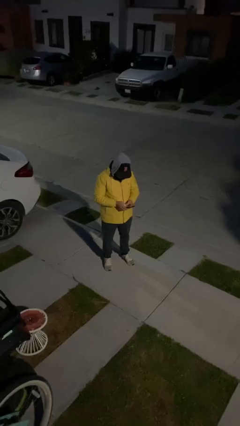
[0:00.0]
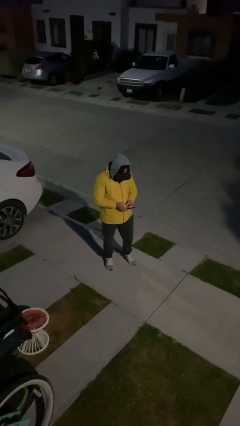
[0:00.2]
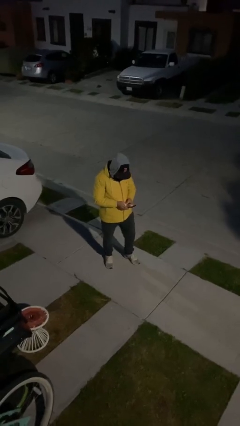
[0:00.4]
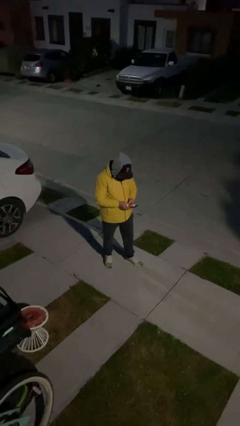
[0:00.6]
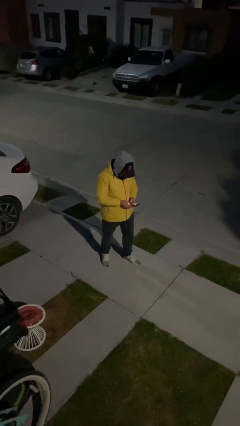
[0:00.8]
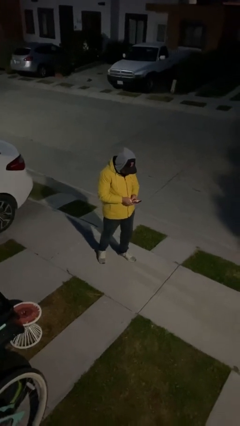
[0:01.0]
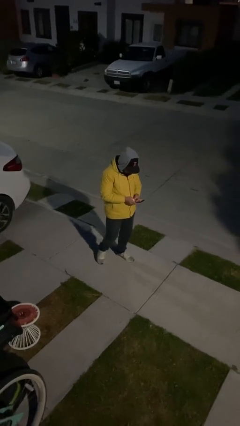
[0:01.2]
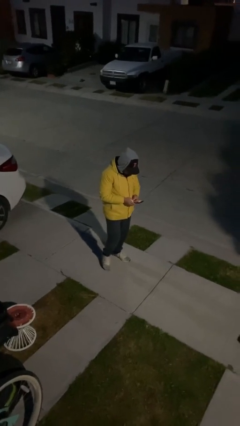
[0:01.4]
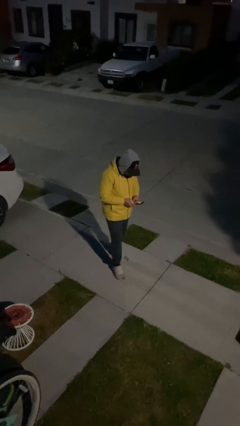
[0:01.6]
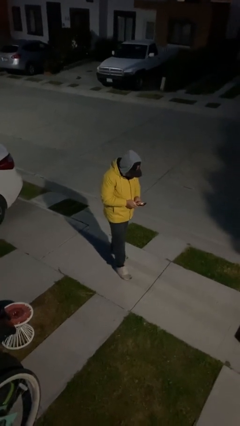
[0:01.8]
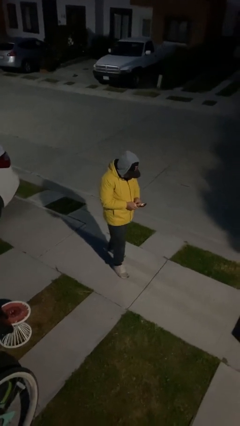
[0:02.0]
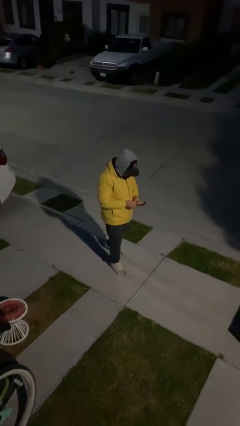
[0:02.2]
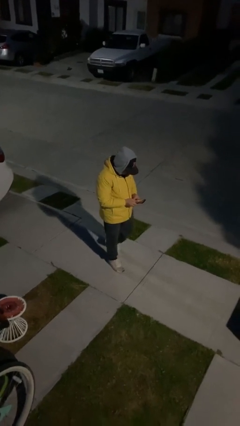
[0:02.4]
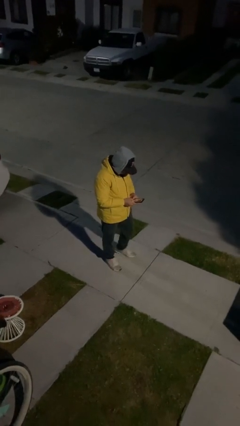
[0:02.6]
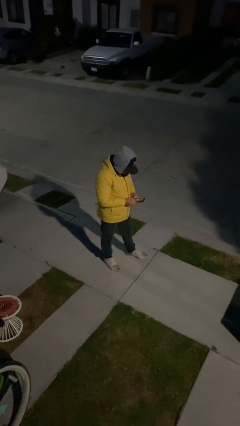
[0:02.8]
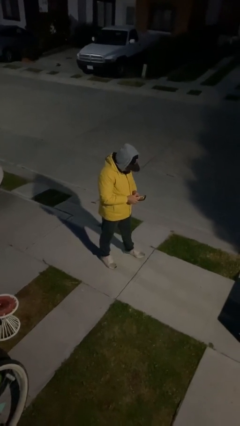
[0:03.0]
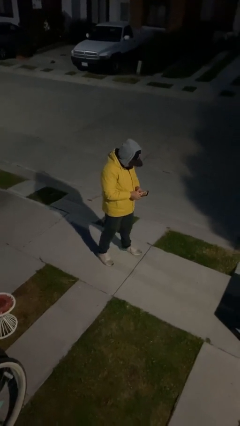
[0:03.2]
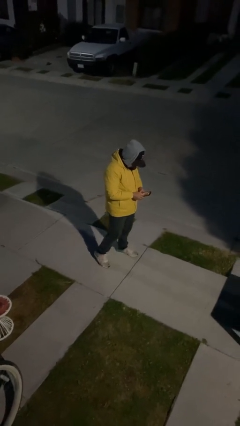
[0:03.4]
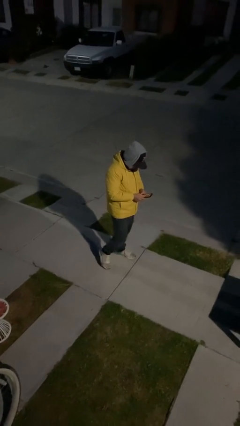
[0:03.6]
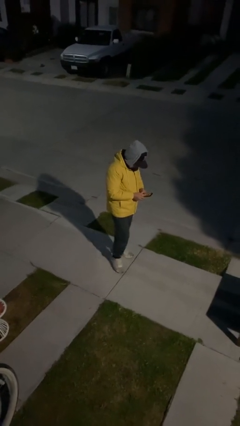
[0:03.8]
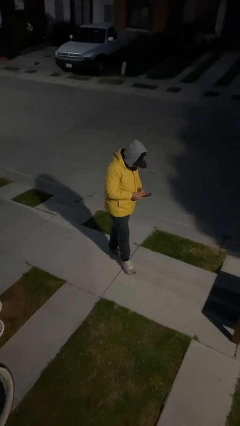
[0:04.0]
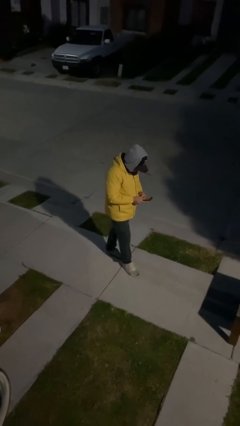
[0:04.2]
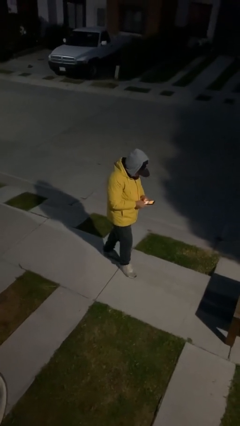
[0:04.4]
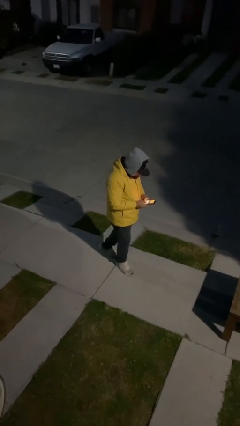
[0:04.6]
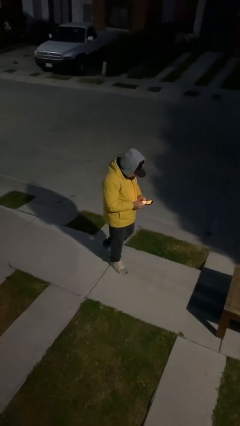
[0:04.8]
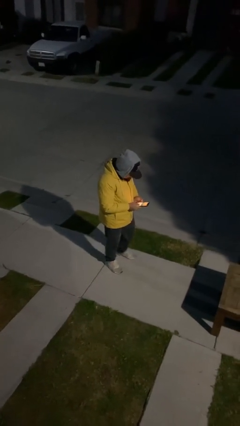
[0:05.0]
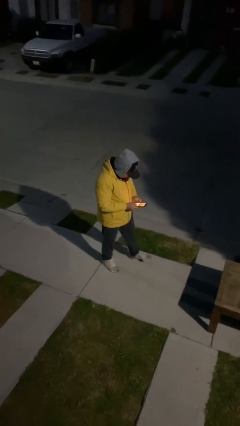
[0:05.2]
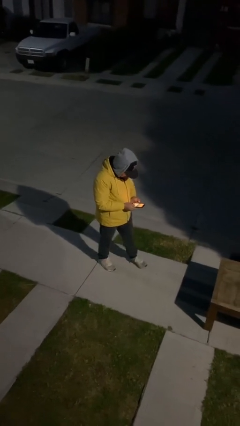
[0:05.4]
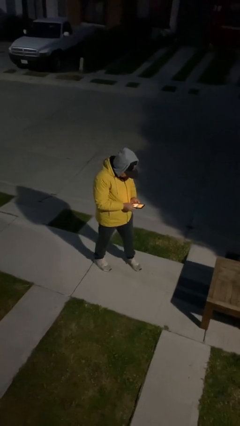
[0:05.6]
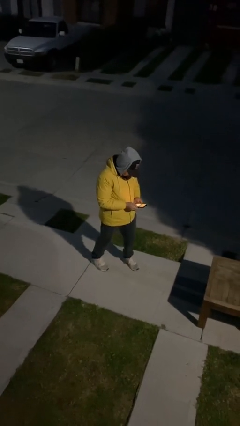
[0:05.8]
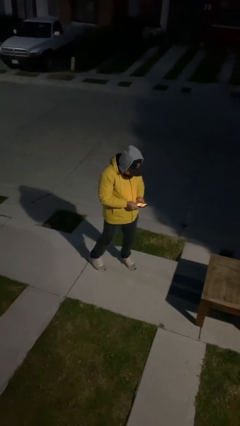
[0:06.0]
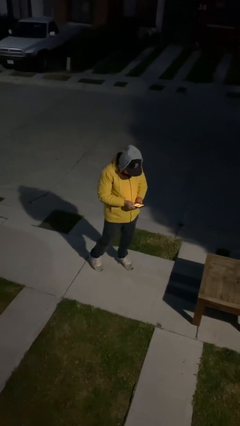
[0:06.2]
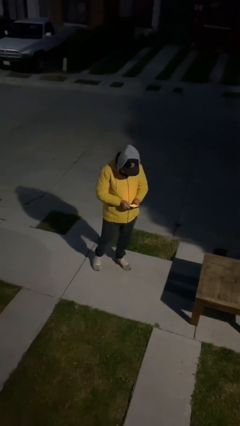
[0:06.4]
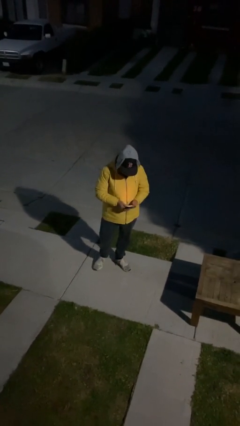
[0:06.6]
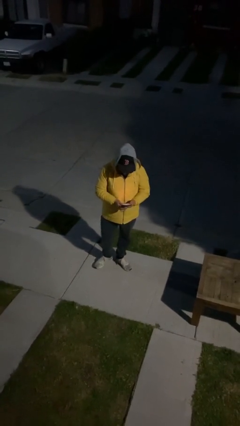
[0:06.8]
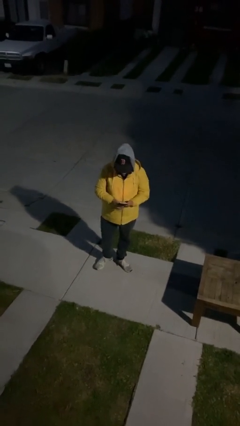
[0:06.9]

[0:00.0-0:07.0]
person texts on phone

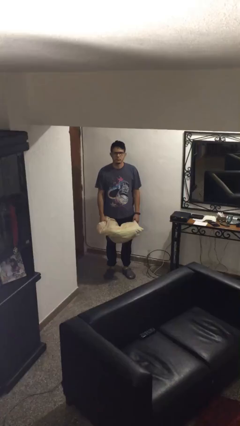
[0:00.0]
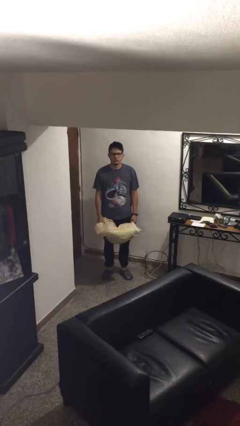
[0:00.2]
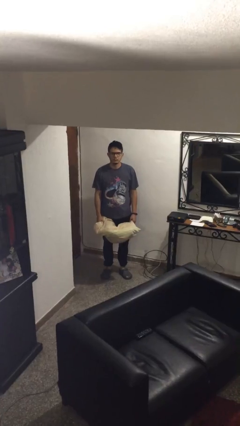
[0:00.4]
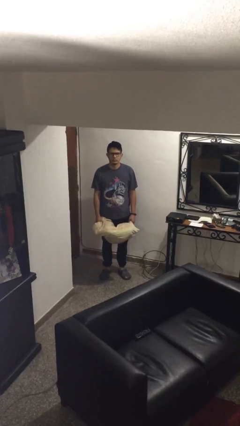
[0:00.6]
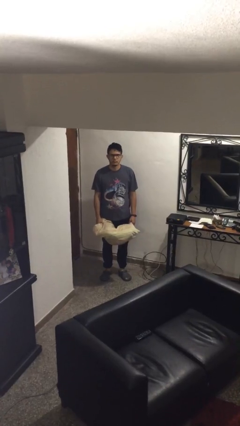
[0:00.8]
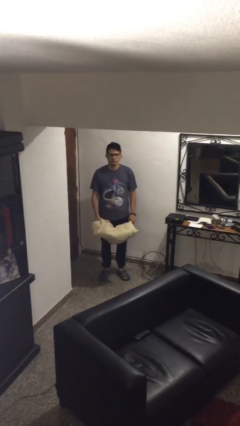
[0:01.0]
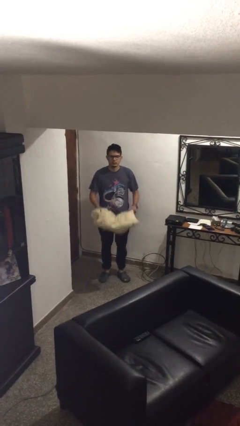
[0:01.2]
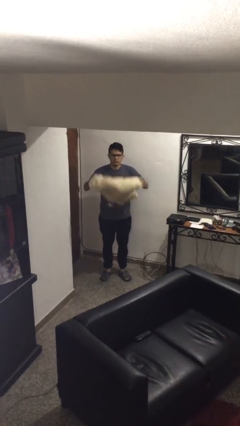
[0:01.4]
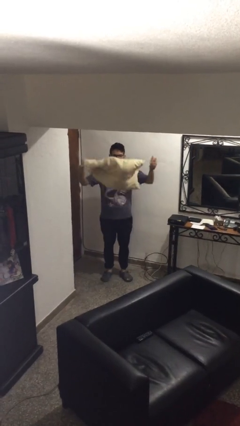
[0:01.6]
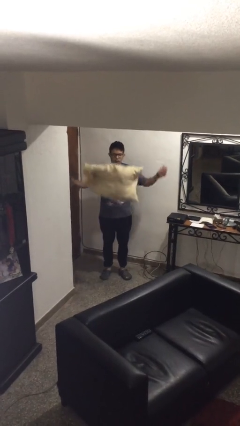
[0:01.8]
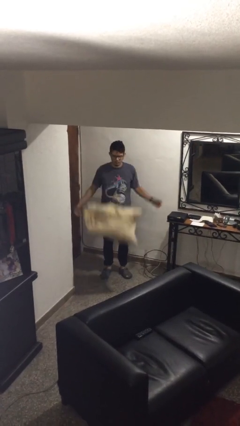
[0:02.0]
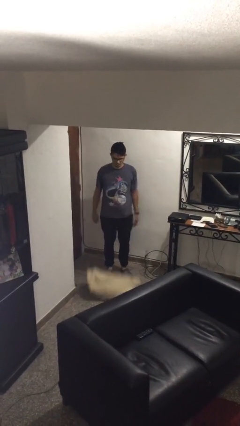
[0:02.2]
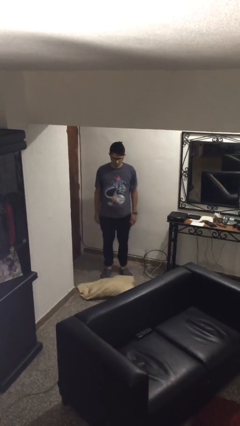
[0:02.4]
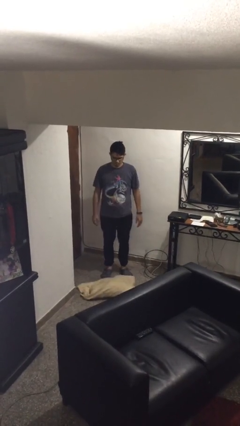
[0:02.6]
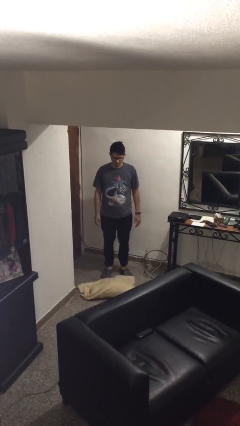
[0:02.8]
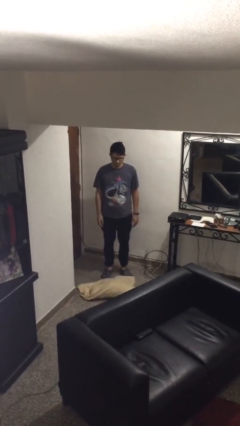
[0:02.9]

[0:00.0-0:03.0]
person throws object into air

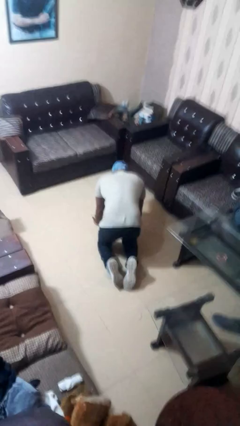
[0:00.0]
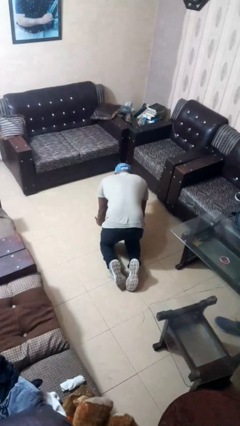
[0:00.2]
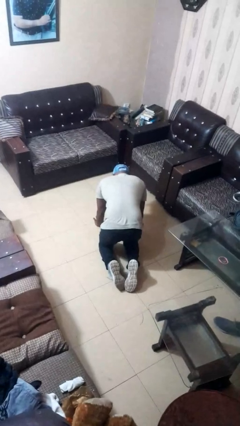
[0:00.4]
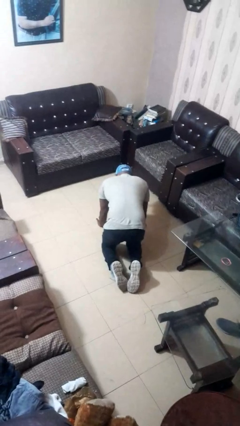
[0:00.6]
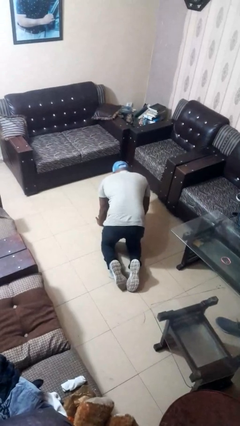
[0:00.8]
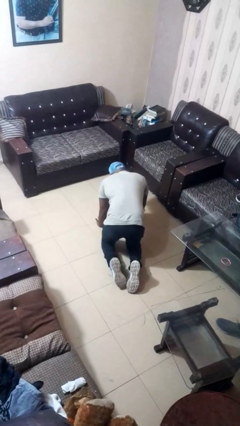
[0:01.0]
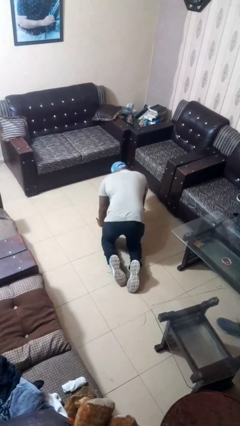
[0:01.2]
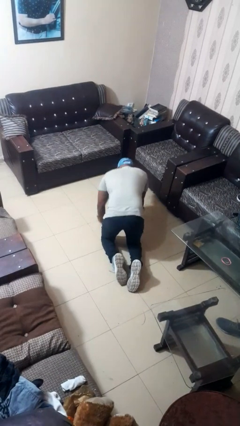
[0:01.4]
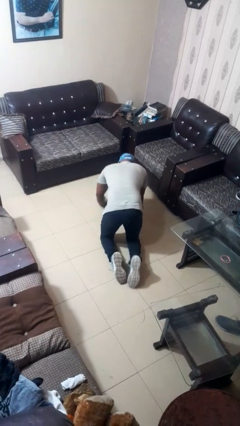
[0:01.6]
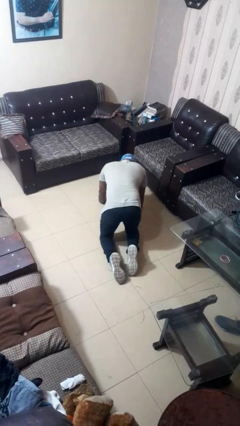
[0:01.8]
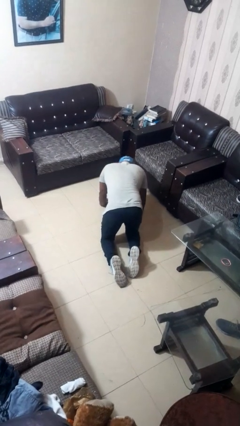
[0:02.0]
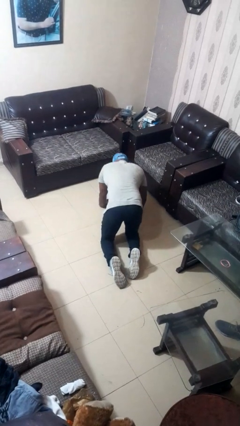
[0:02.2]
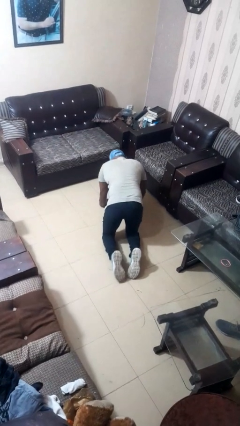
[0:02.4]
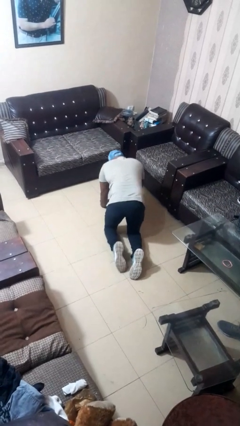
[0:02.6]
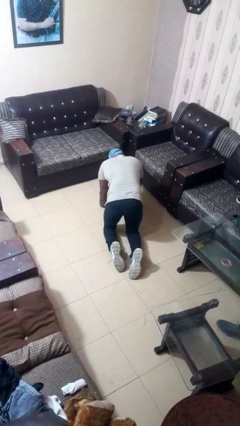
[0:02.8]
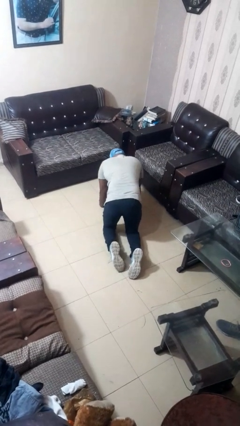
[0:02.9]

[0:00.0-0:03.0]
person crawls

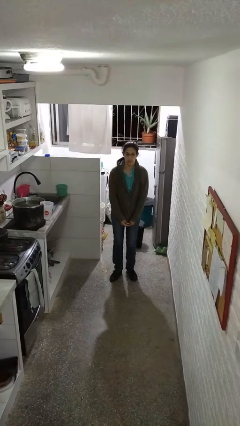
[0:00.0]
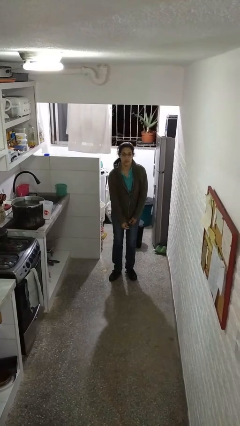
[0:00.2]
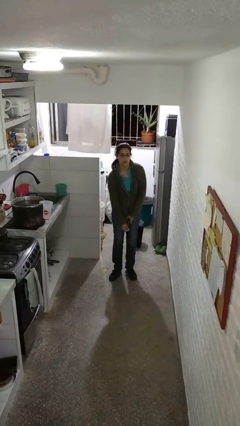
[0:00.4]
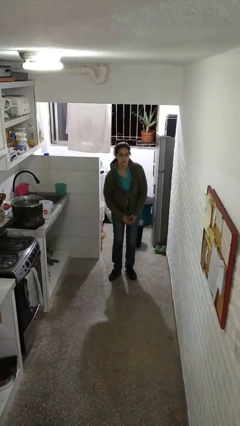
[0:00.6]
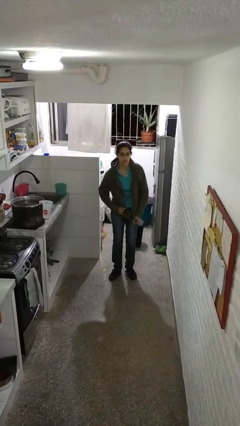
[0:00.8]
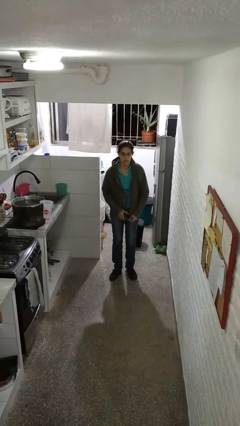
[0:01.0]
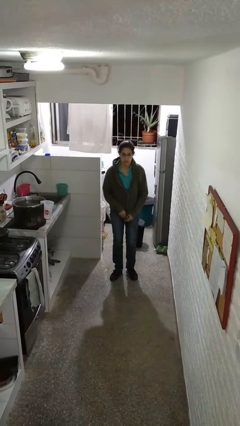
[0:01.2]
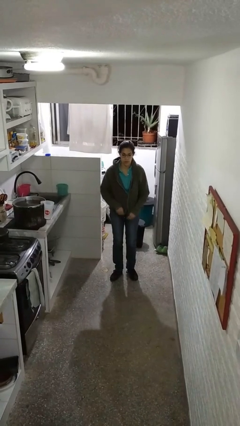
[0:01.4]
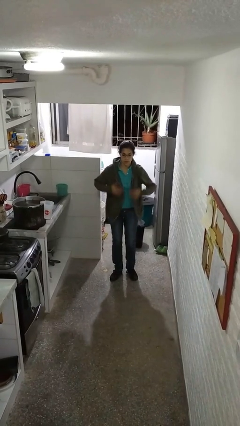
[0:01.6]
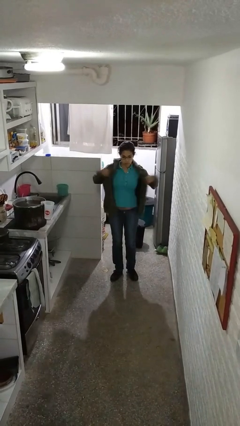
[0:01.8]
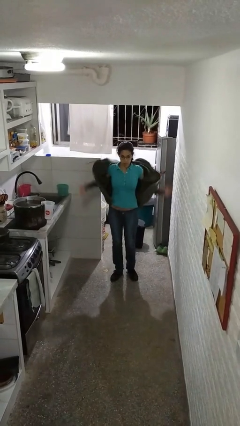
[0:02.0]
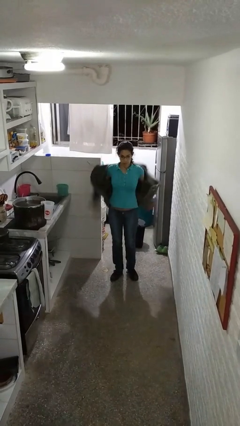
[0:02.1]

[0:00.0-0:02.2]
person unzips jacket

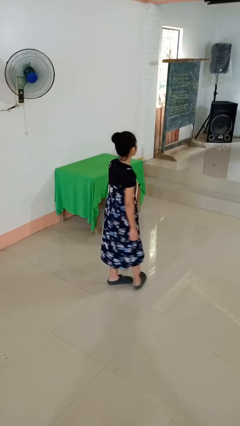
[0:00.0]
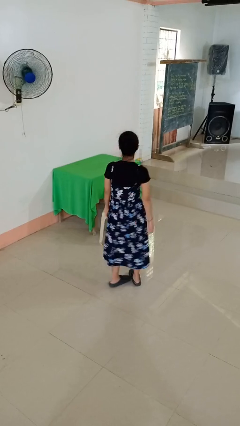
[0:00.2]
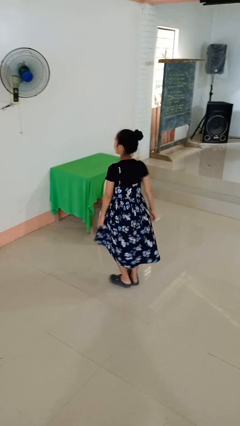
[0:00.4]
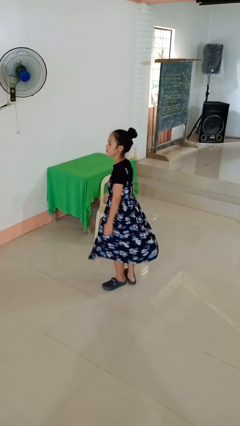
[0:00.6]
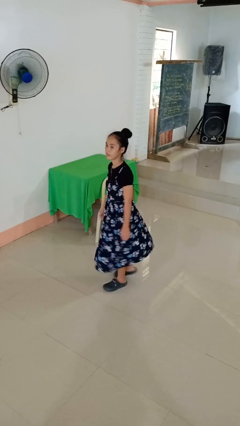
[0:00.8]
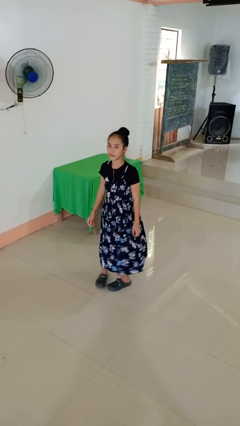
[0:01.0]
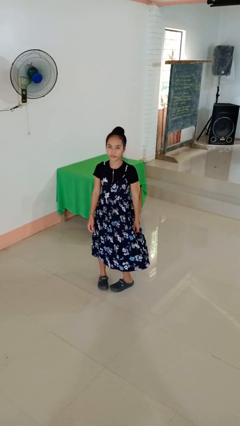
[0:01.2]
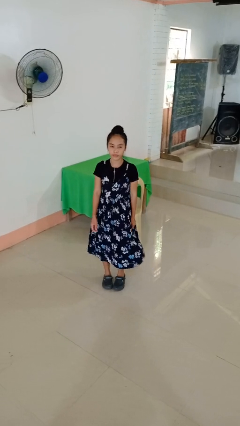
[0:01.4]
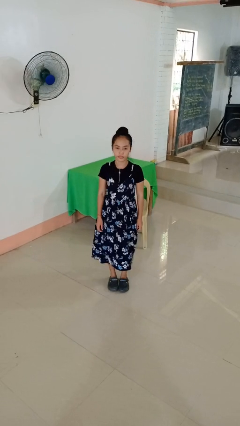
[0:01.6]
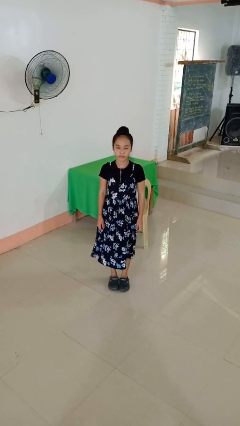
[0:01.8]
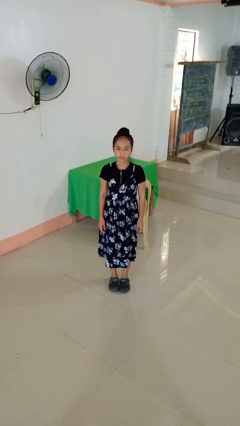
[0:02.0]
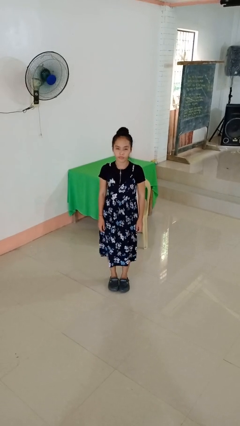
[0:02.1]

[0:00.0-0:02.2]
person twirls

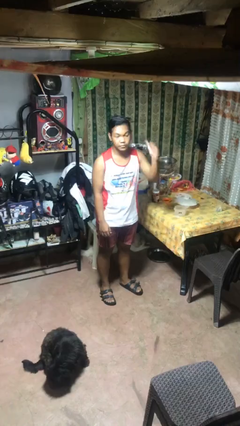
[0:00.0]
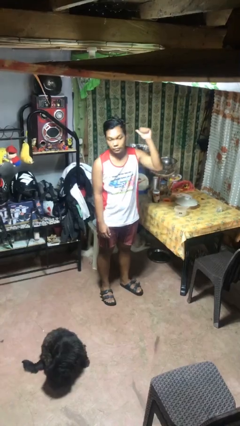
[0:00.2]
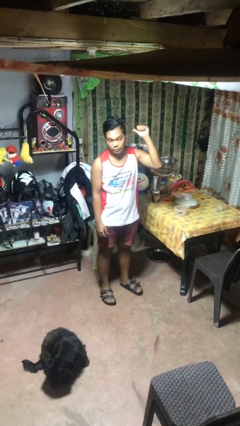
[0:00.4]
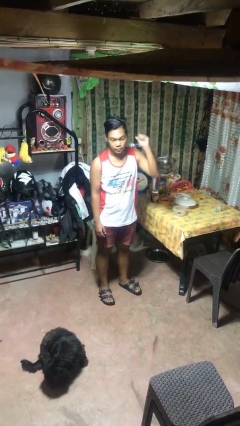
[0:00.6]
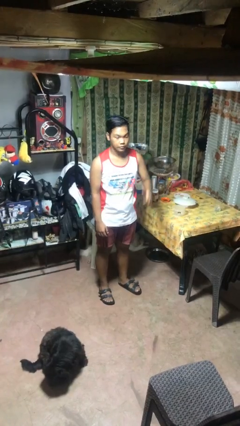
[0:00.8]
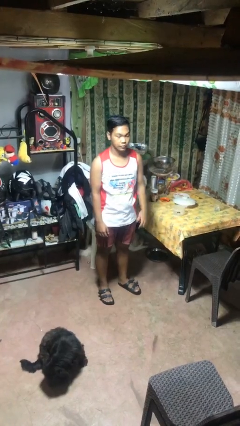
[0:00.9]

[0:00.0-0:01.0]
person gestures behind me
